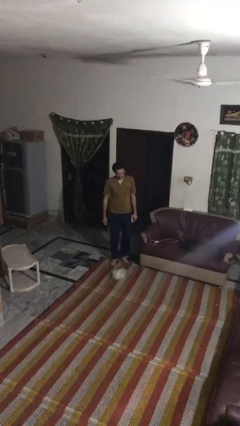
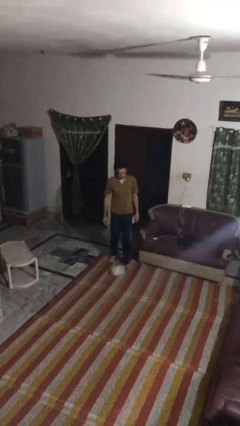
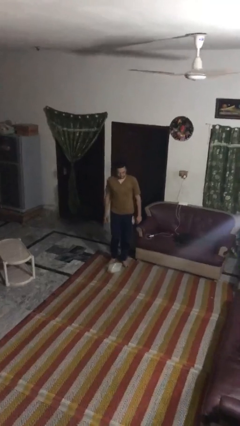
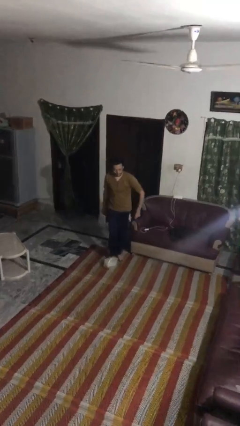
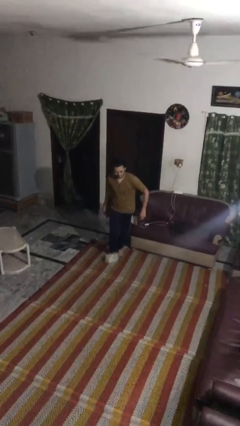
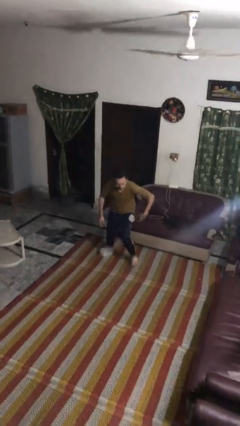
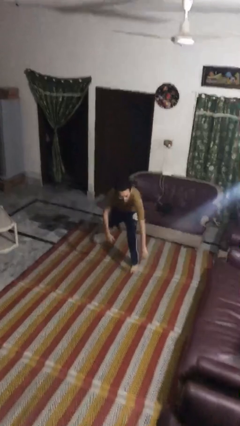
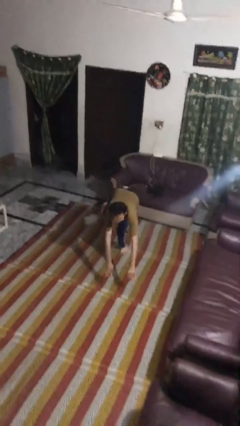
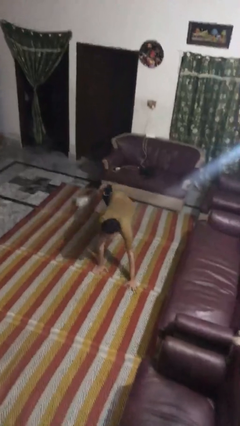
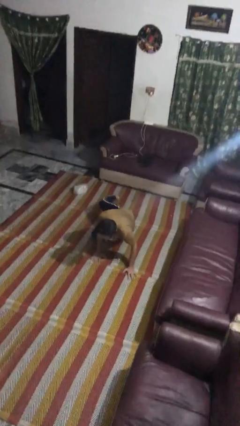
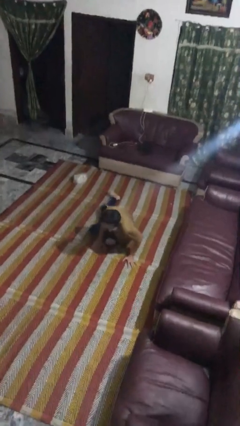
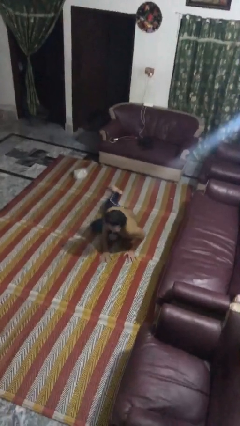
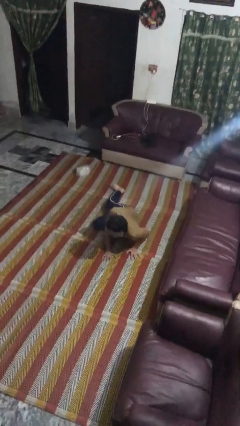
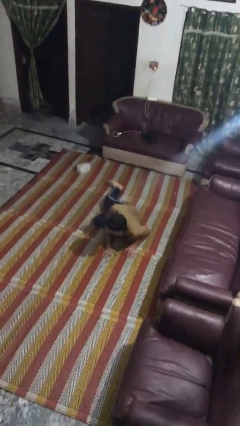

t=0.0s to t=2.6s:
person trips on object on floor

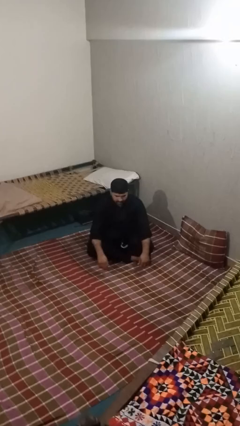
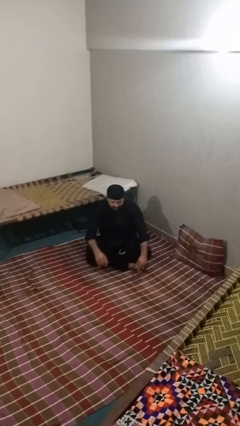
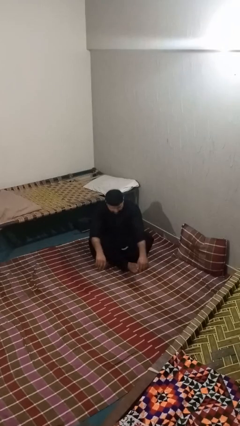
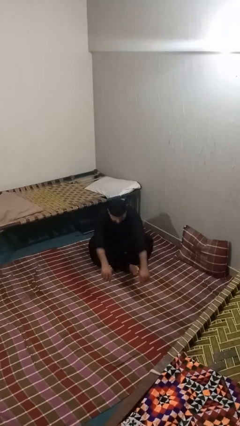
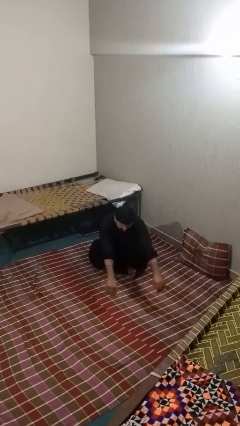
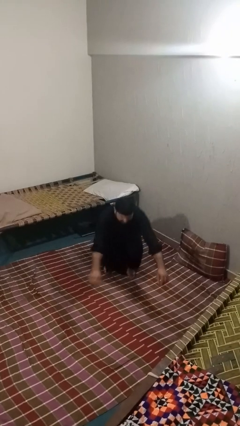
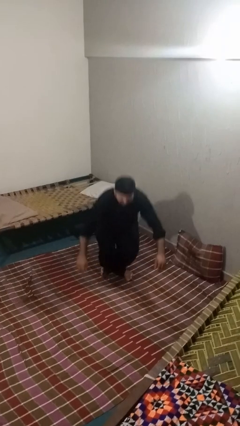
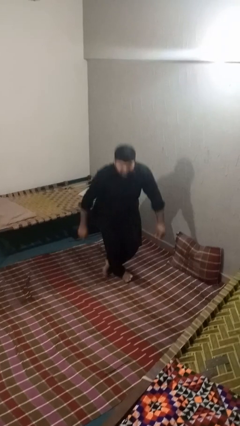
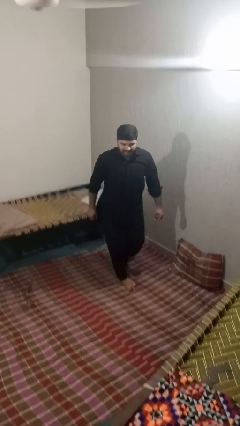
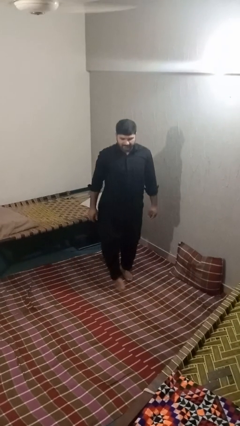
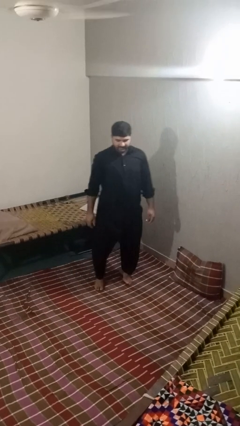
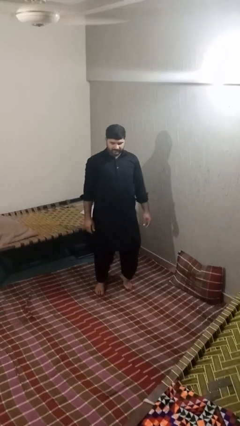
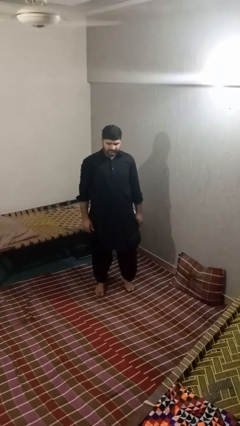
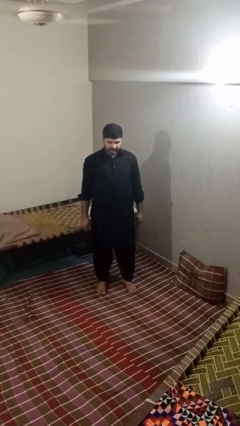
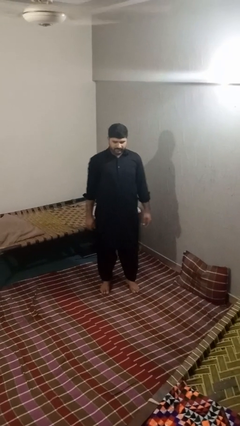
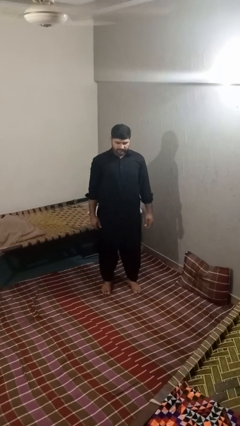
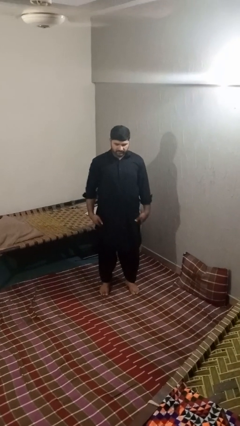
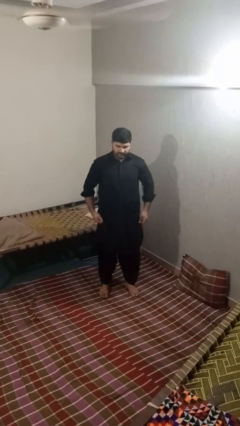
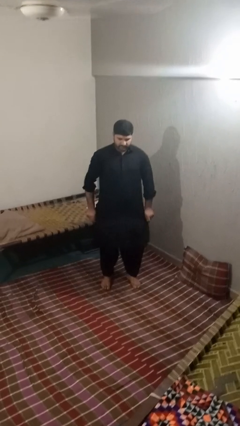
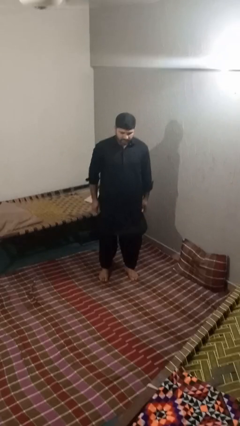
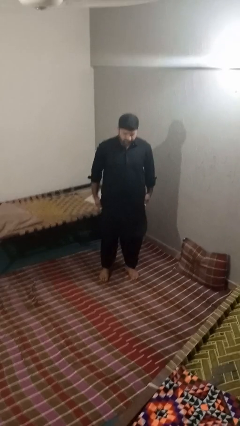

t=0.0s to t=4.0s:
person stands up from floor

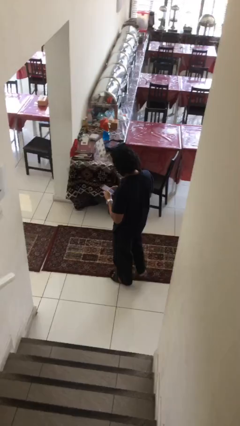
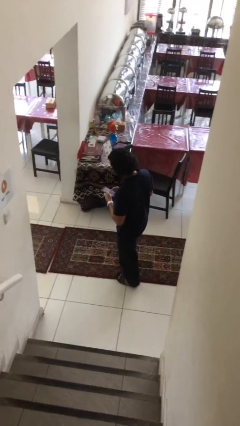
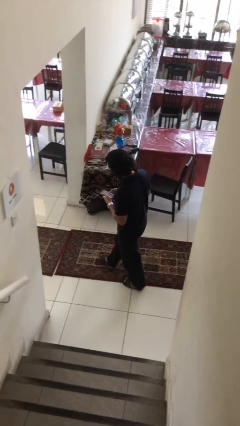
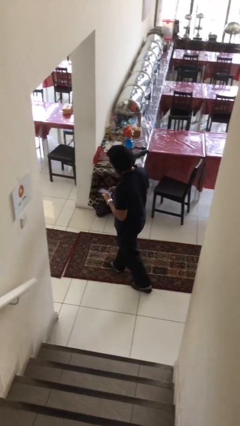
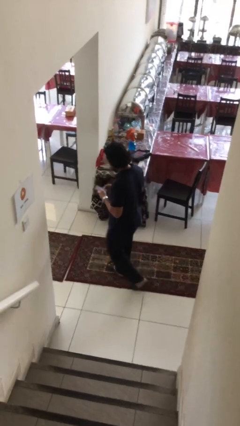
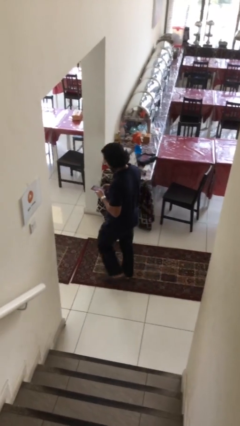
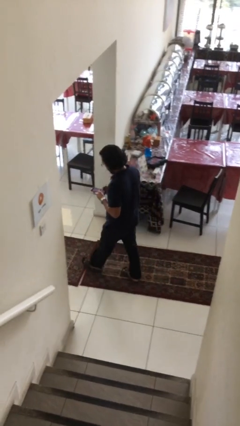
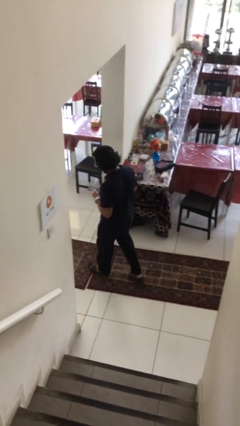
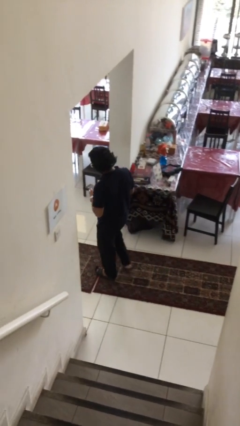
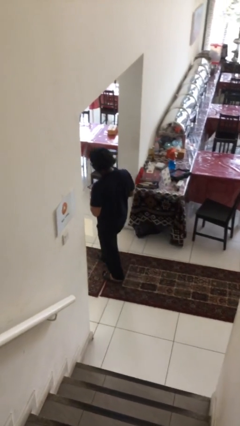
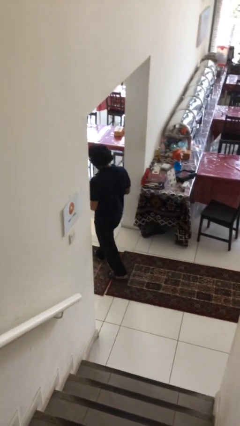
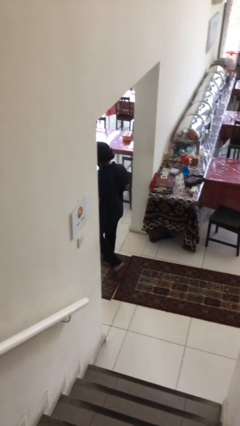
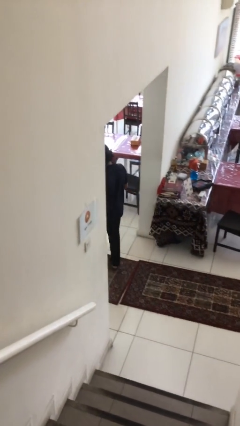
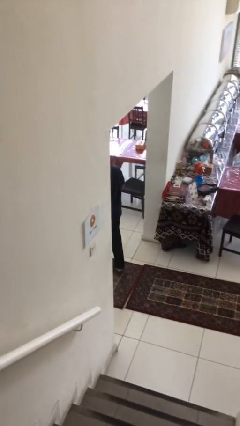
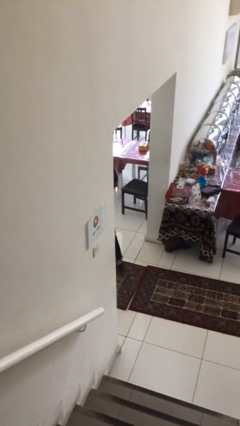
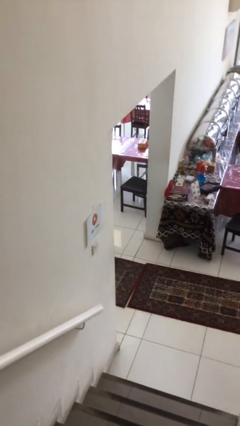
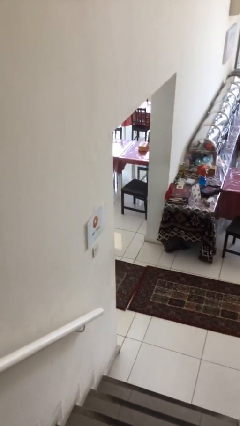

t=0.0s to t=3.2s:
person exits scene through structure

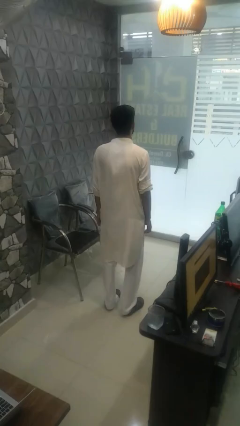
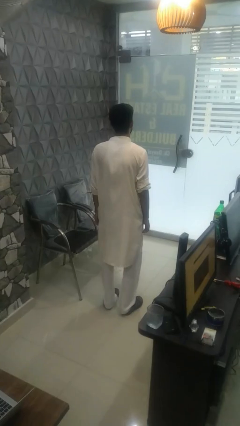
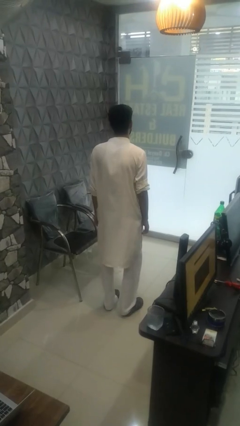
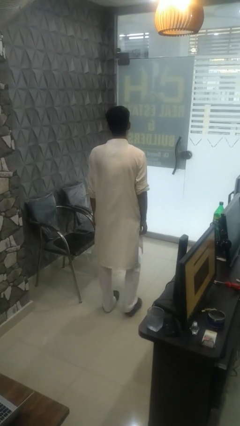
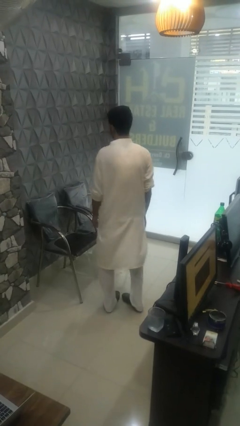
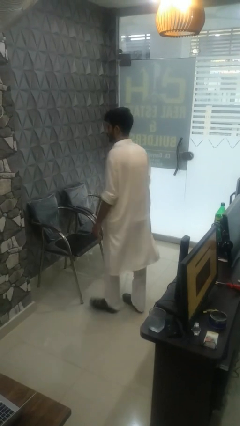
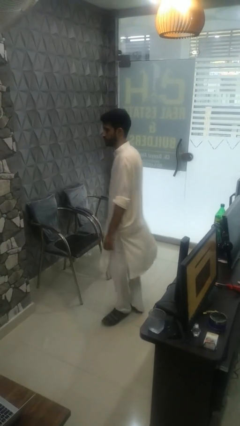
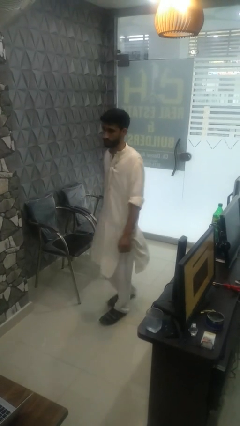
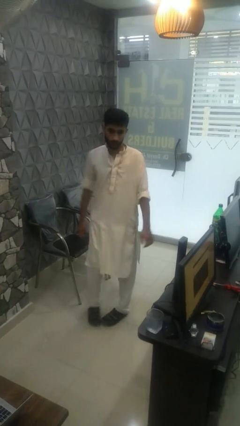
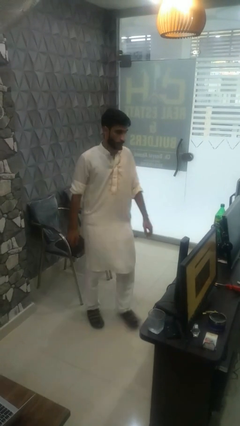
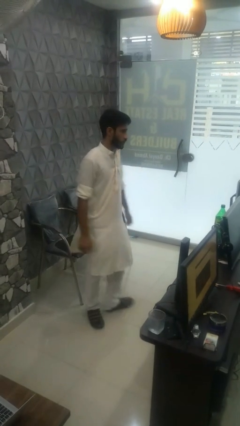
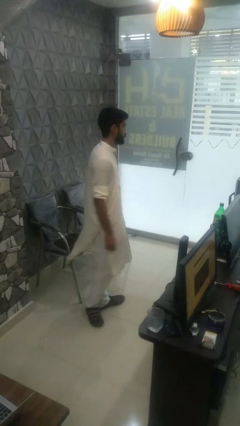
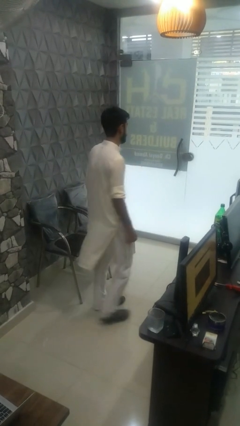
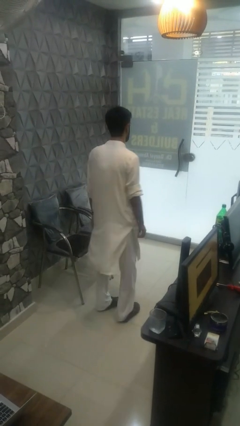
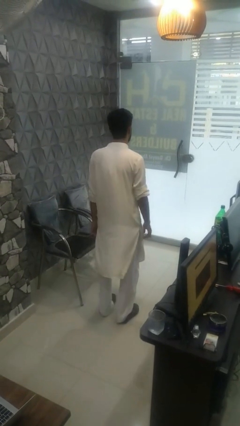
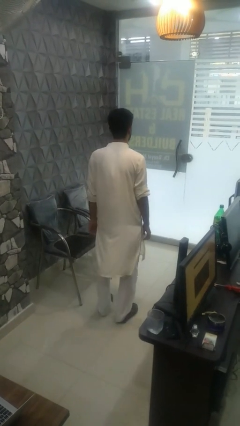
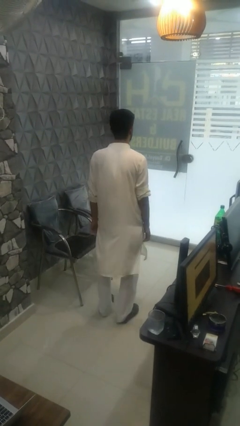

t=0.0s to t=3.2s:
person twirls

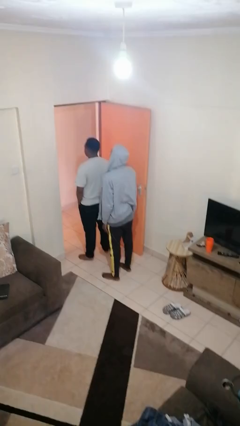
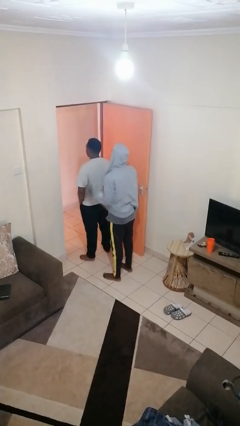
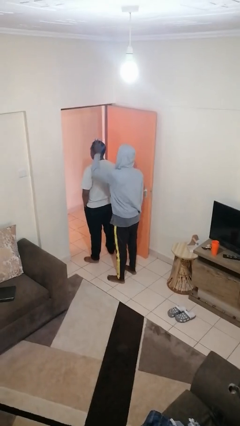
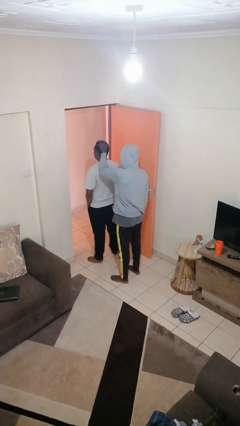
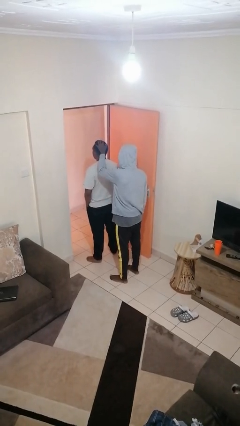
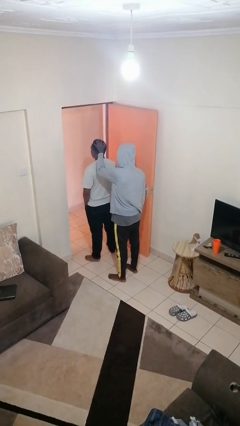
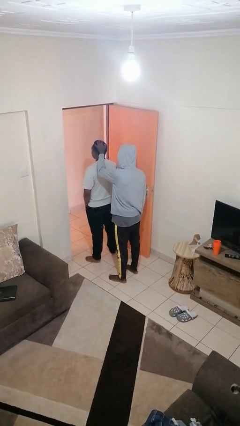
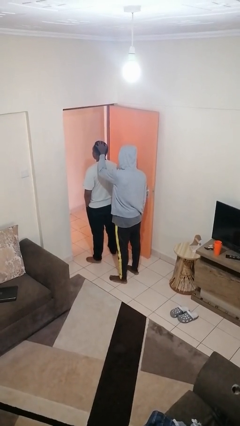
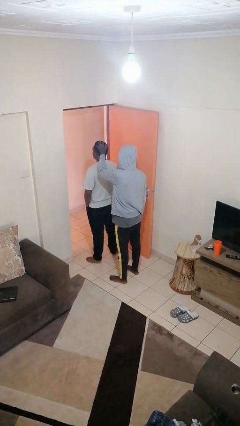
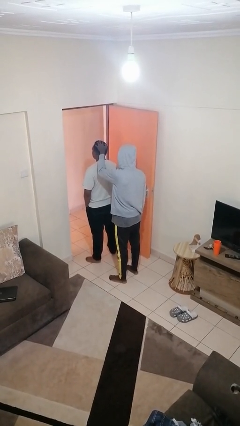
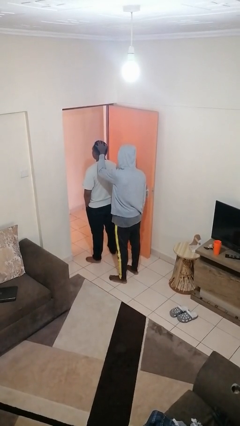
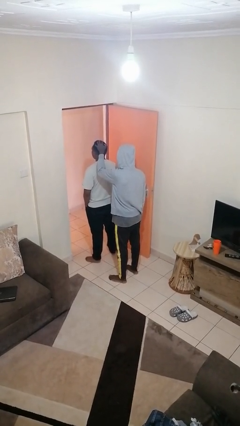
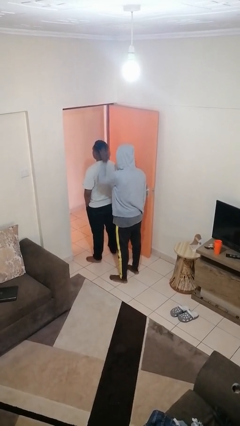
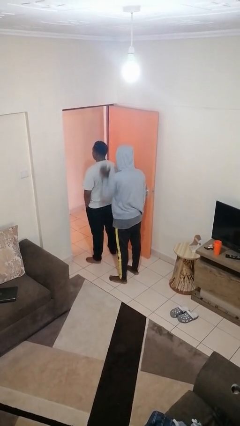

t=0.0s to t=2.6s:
person grabs person by hair

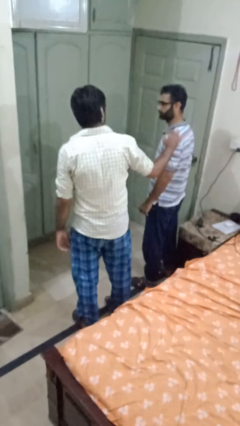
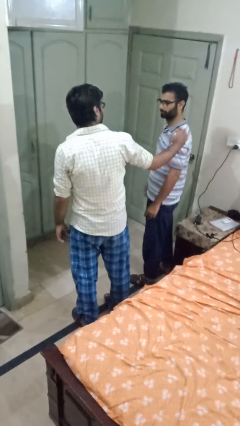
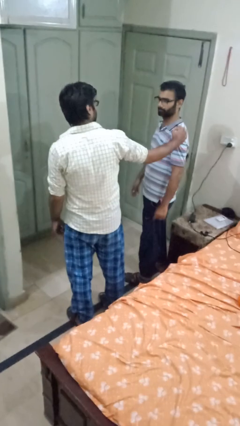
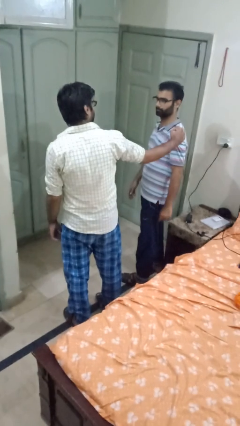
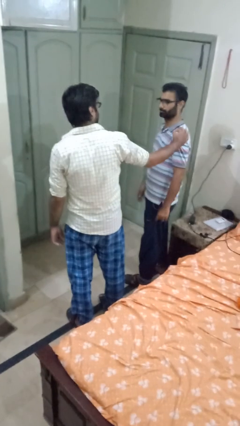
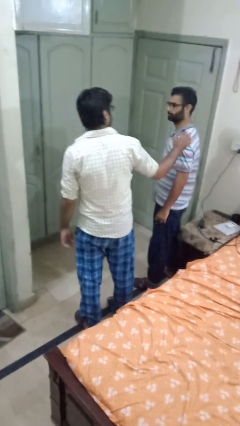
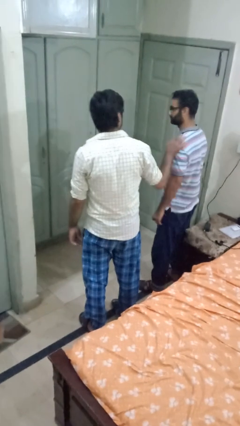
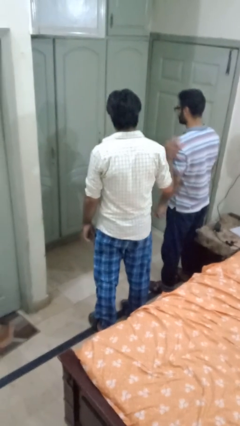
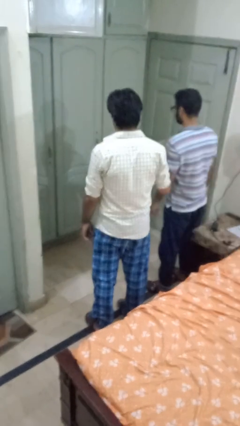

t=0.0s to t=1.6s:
person spins person around
